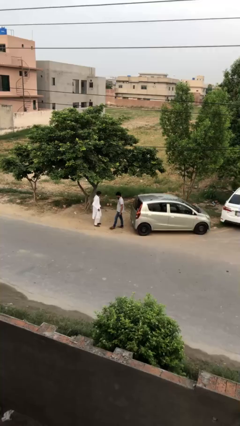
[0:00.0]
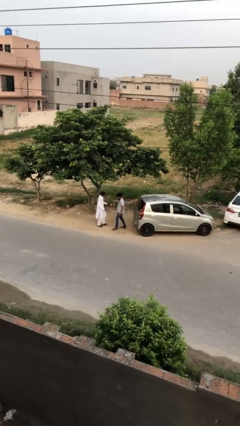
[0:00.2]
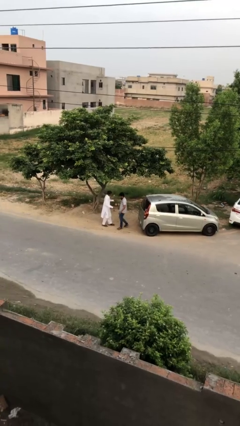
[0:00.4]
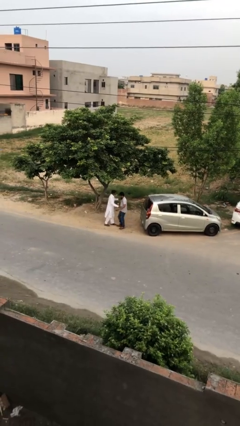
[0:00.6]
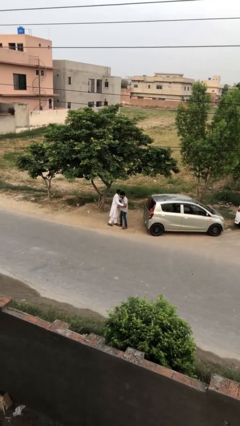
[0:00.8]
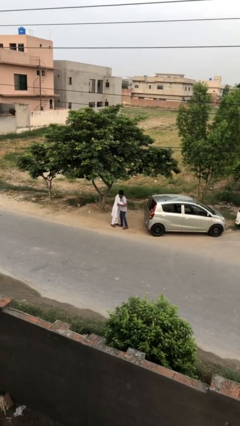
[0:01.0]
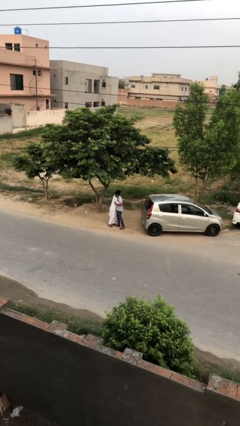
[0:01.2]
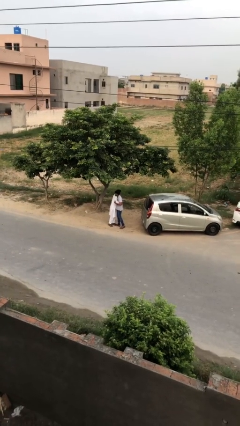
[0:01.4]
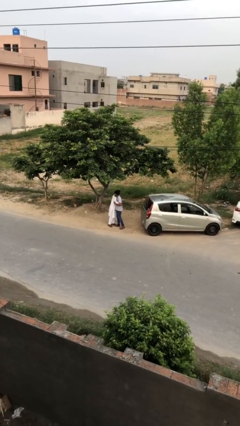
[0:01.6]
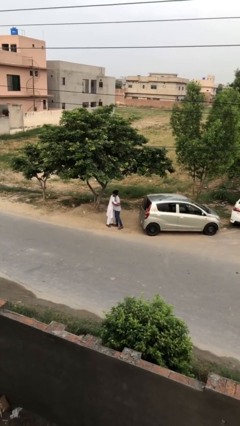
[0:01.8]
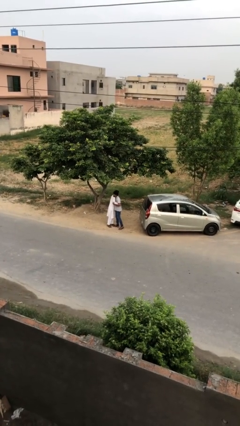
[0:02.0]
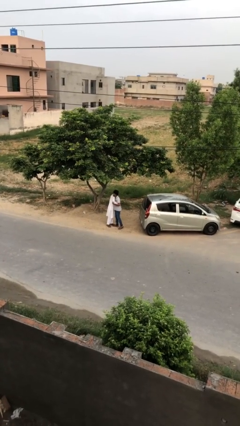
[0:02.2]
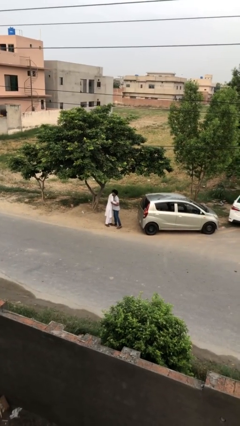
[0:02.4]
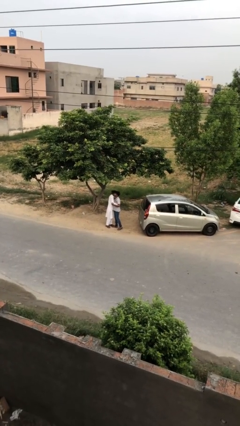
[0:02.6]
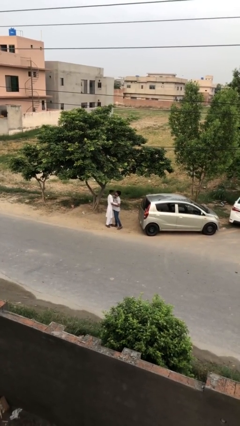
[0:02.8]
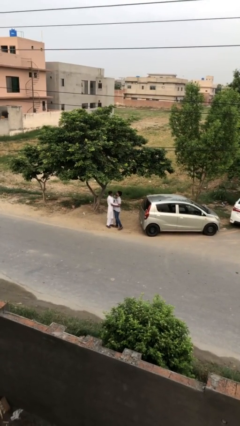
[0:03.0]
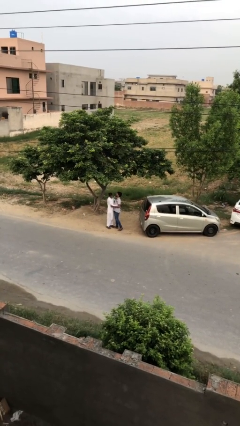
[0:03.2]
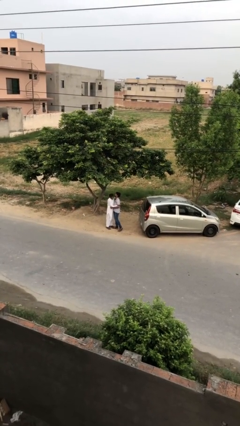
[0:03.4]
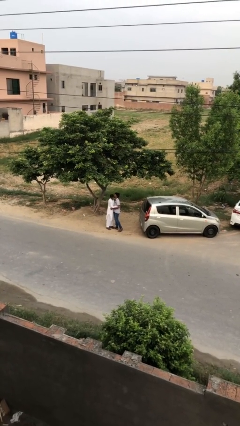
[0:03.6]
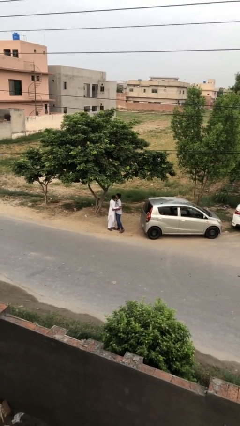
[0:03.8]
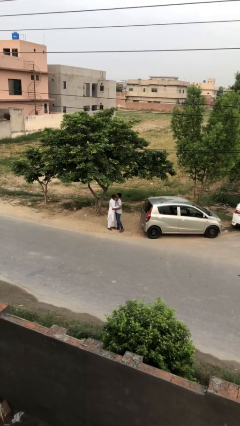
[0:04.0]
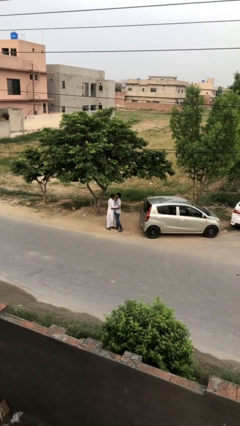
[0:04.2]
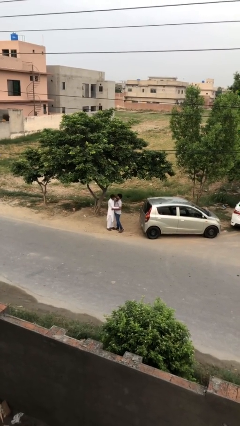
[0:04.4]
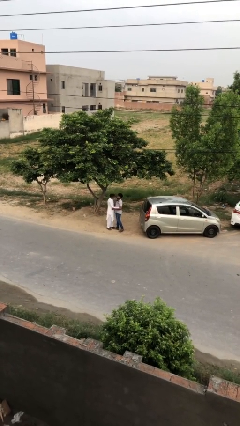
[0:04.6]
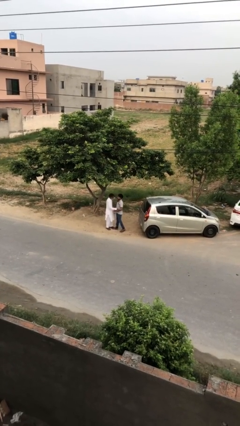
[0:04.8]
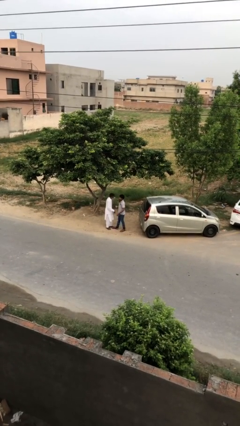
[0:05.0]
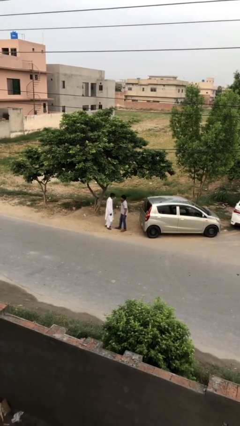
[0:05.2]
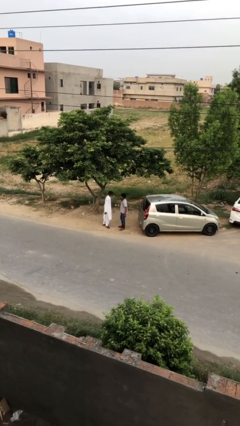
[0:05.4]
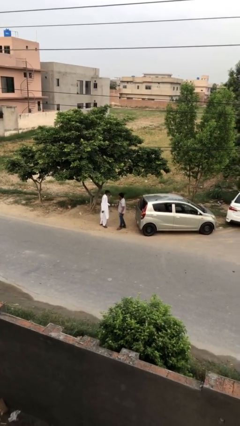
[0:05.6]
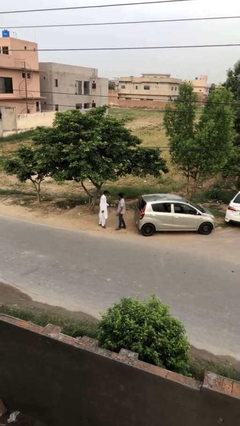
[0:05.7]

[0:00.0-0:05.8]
person embraces person

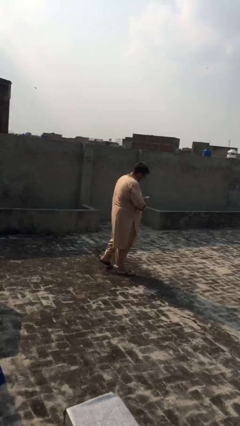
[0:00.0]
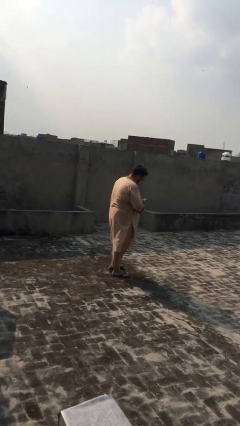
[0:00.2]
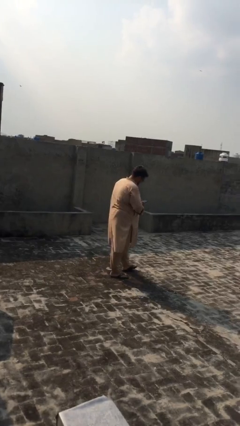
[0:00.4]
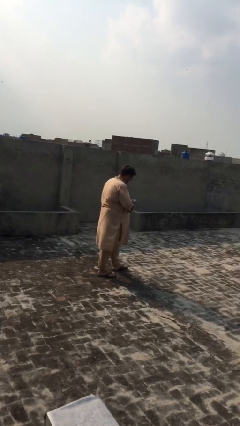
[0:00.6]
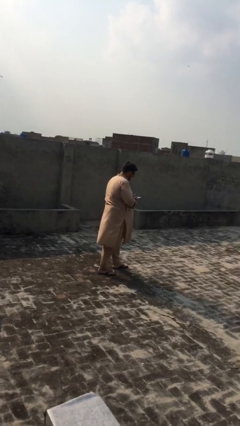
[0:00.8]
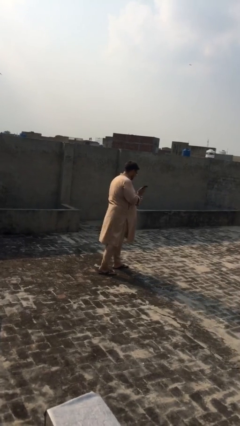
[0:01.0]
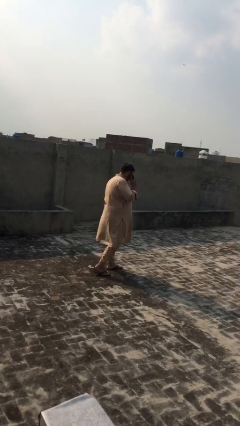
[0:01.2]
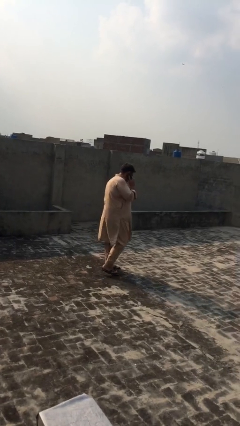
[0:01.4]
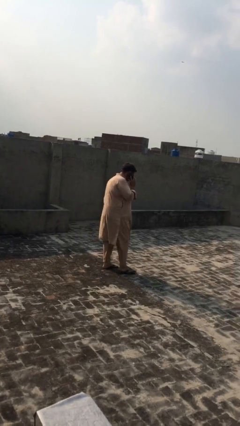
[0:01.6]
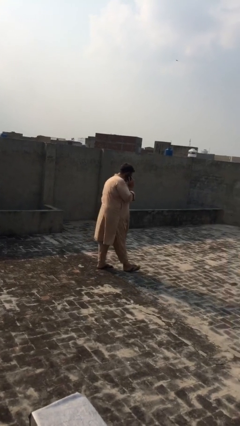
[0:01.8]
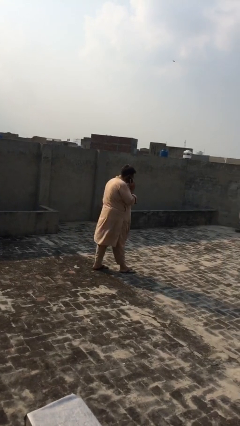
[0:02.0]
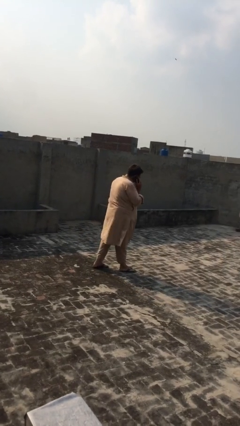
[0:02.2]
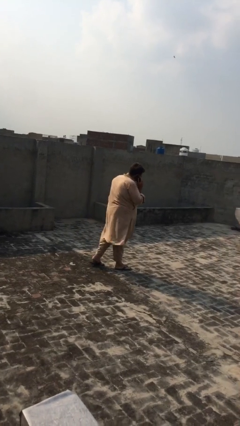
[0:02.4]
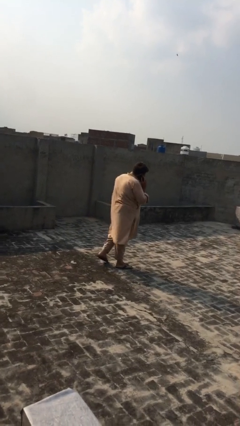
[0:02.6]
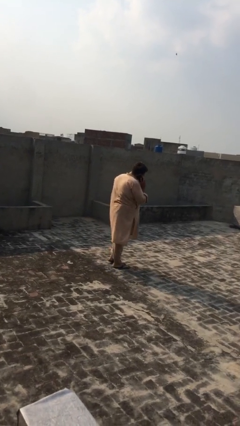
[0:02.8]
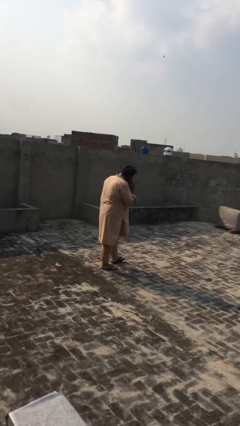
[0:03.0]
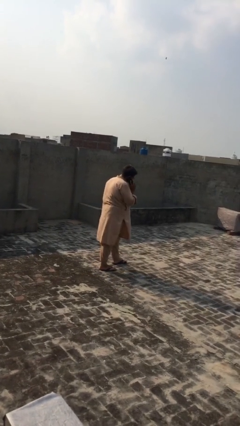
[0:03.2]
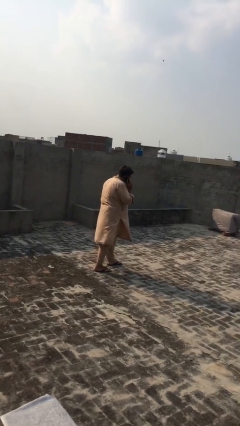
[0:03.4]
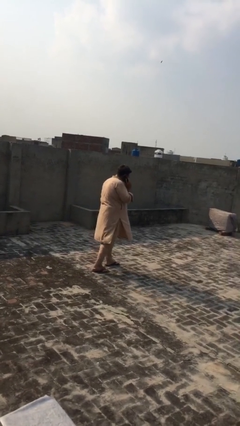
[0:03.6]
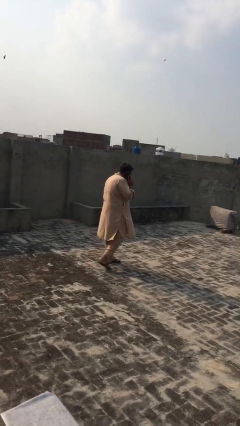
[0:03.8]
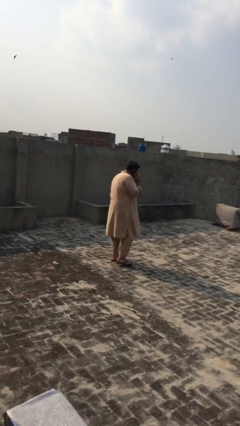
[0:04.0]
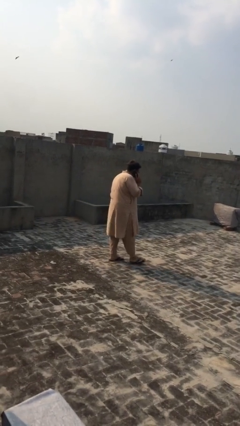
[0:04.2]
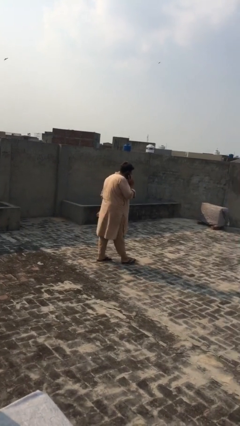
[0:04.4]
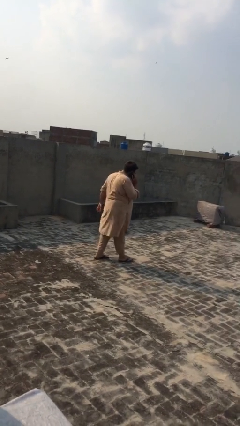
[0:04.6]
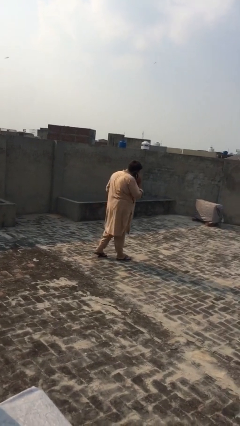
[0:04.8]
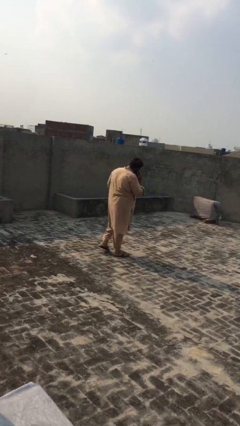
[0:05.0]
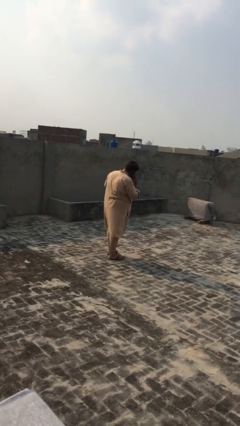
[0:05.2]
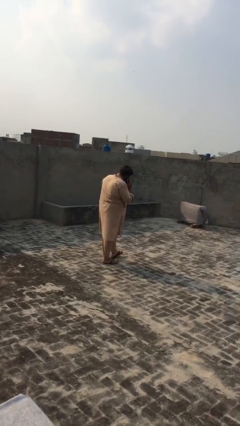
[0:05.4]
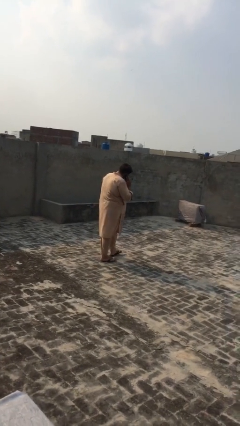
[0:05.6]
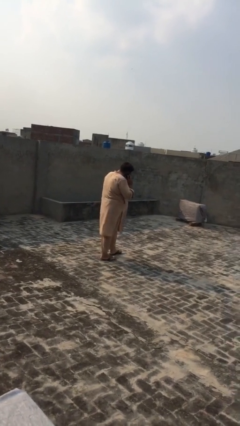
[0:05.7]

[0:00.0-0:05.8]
person talks on phone

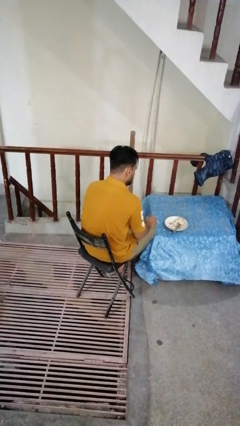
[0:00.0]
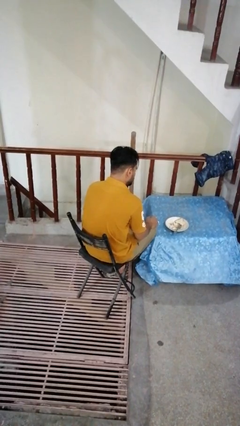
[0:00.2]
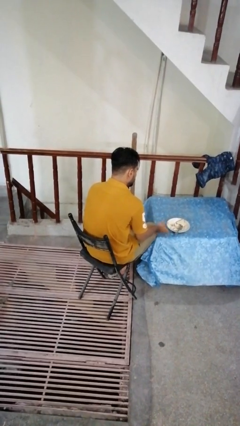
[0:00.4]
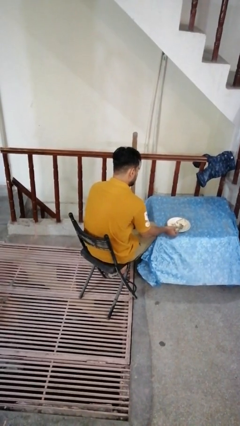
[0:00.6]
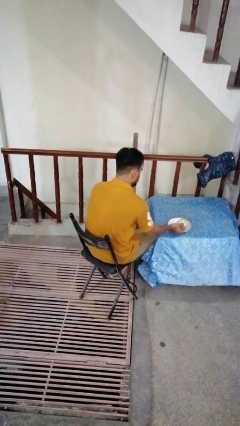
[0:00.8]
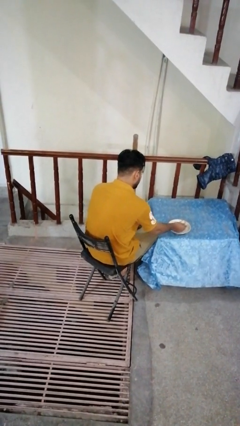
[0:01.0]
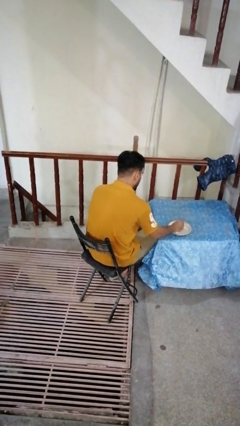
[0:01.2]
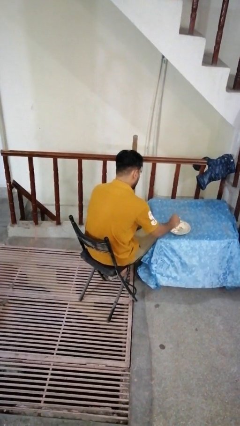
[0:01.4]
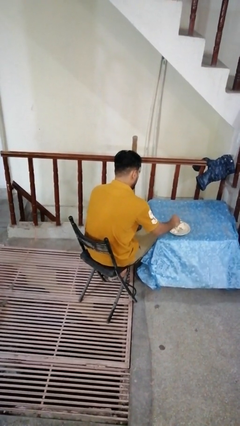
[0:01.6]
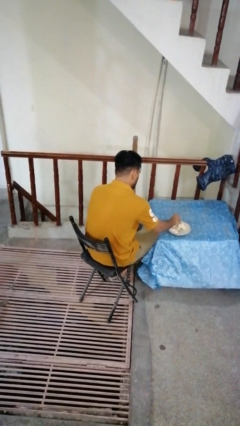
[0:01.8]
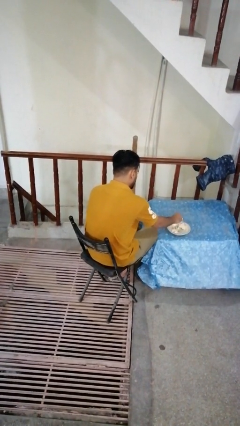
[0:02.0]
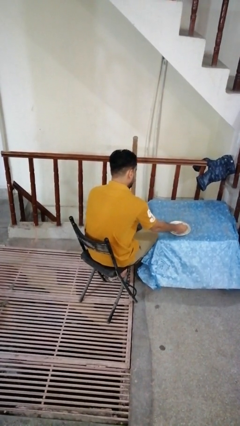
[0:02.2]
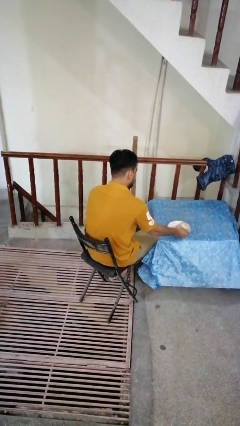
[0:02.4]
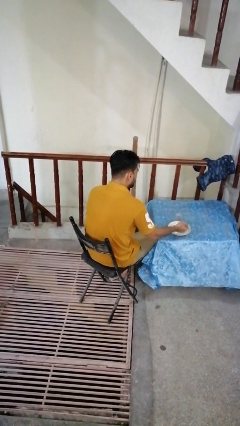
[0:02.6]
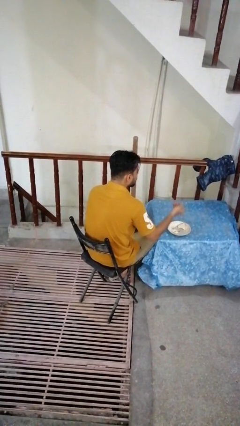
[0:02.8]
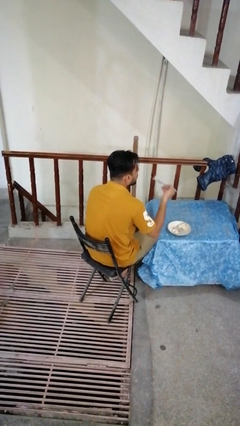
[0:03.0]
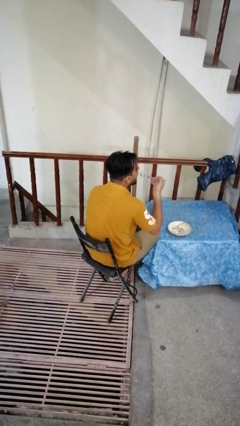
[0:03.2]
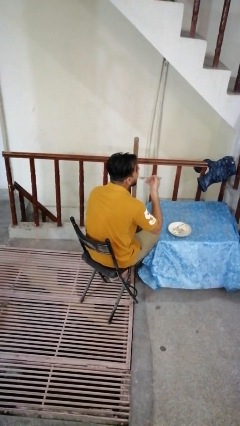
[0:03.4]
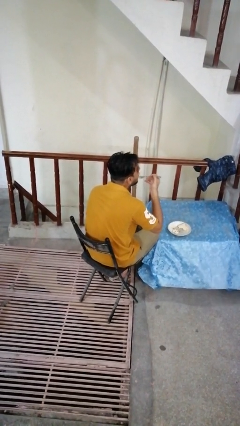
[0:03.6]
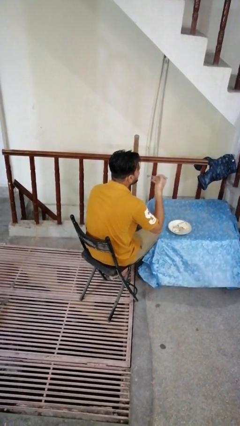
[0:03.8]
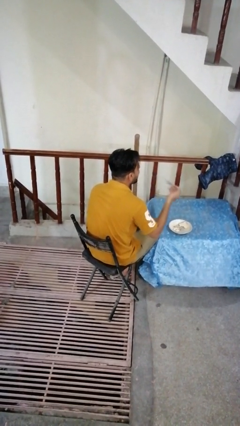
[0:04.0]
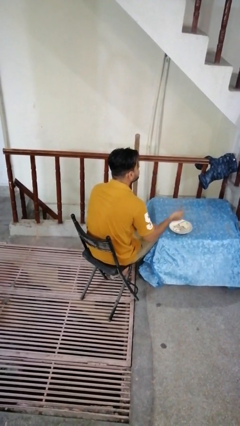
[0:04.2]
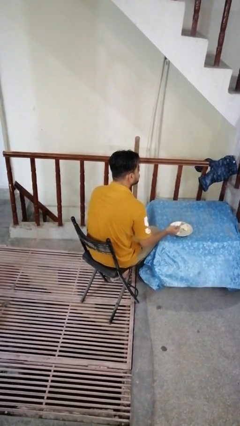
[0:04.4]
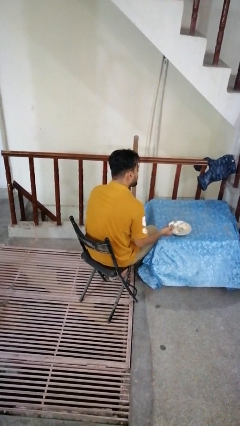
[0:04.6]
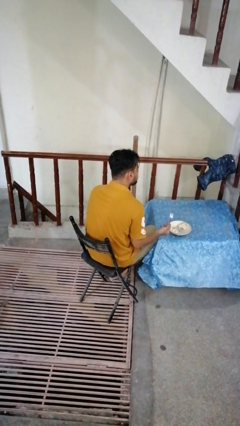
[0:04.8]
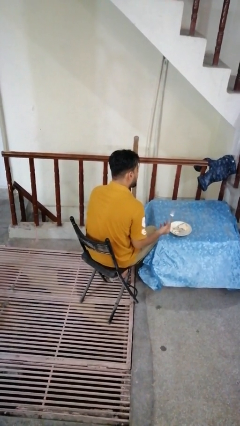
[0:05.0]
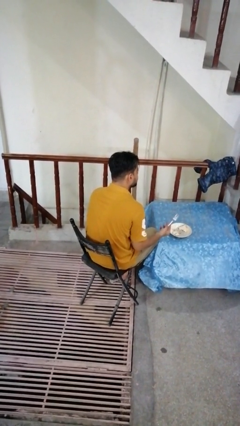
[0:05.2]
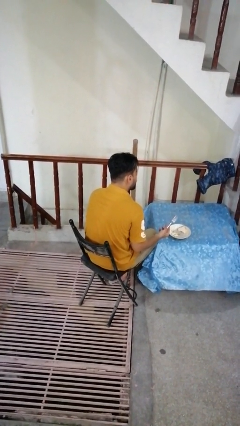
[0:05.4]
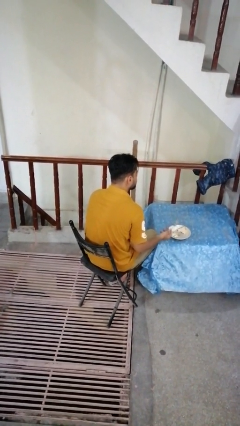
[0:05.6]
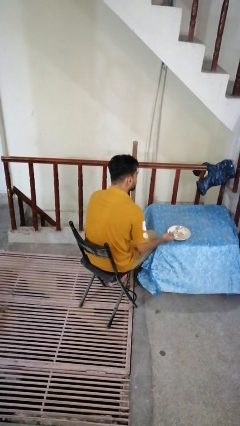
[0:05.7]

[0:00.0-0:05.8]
person eats with utensil

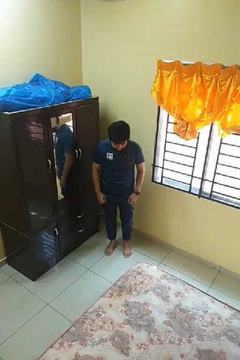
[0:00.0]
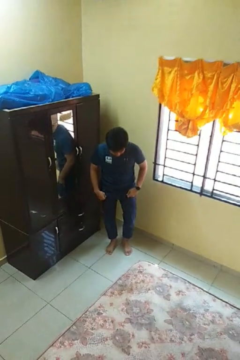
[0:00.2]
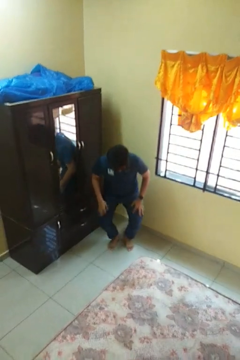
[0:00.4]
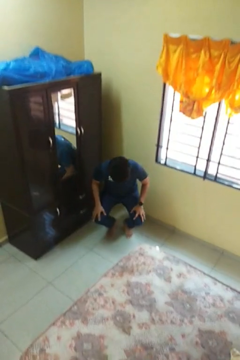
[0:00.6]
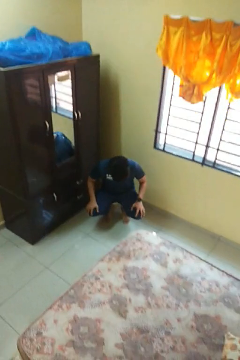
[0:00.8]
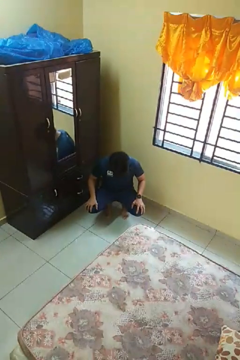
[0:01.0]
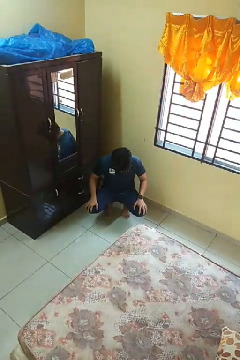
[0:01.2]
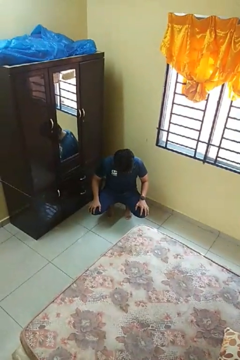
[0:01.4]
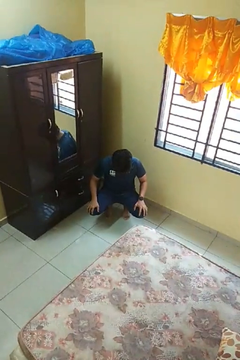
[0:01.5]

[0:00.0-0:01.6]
person squats
